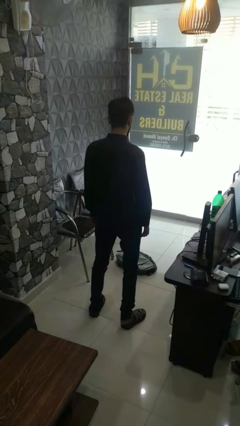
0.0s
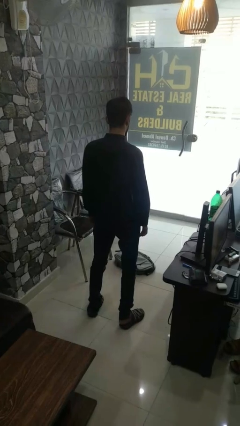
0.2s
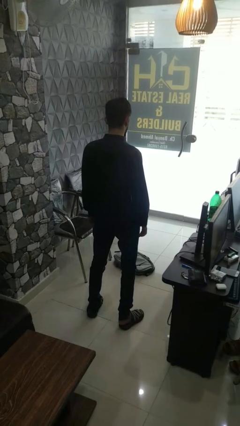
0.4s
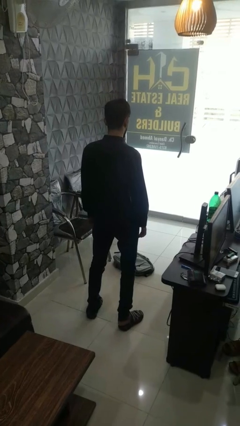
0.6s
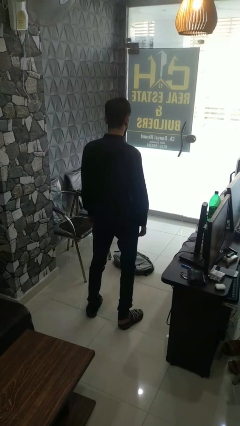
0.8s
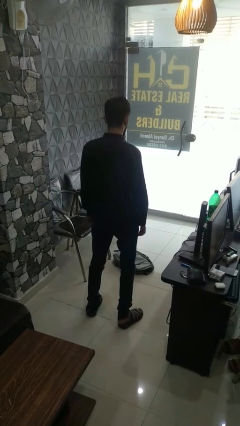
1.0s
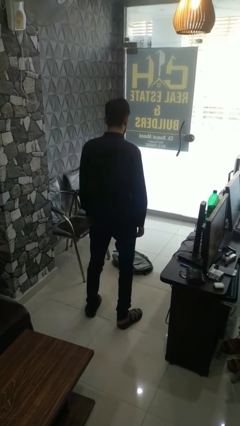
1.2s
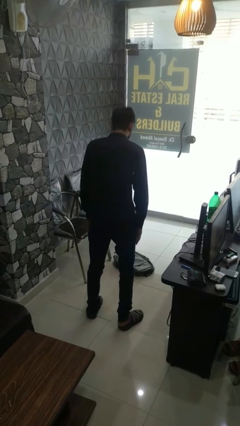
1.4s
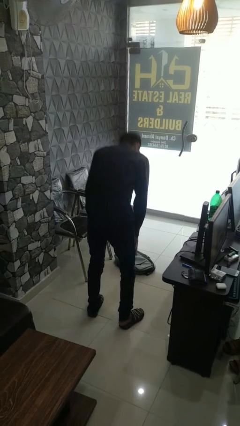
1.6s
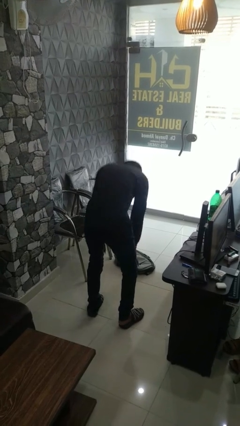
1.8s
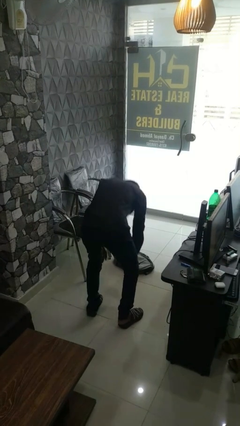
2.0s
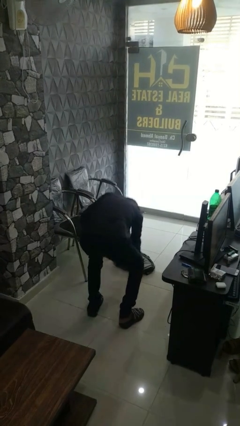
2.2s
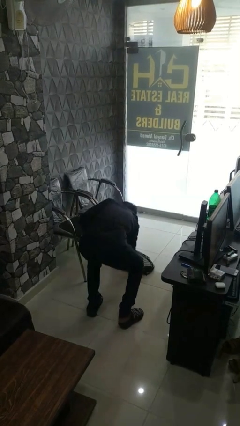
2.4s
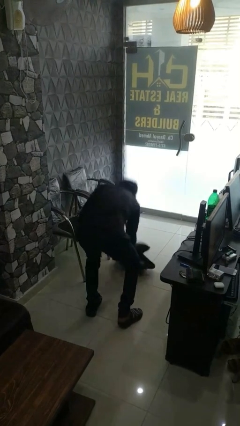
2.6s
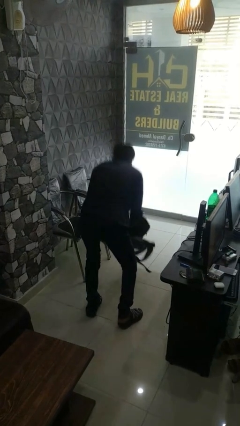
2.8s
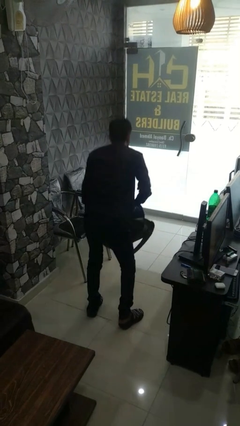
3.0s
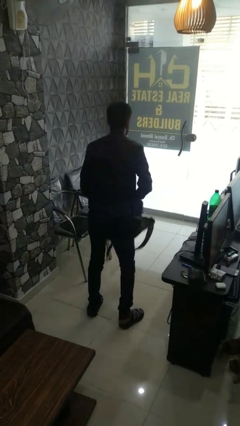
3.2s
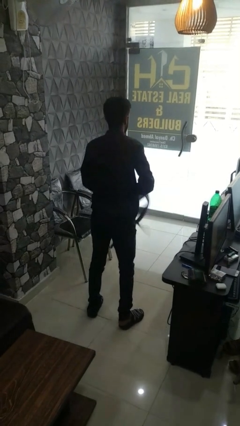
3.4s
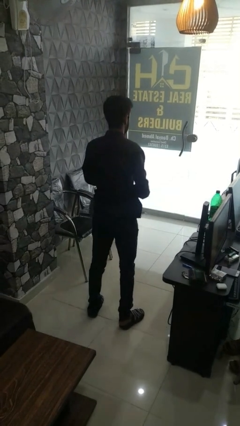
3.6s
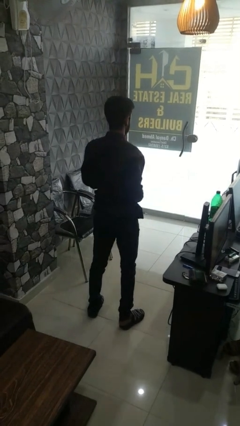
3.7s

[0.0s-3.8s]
person picks up object from floor

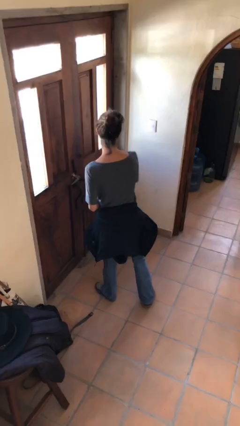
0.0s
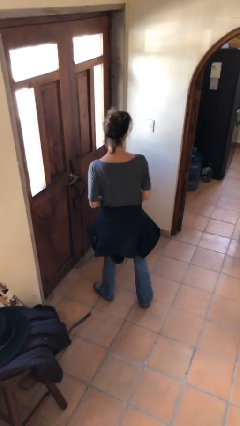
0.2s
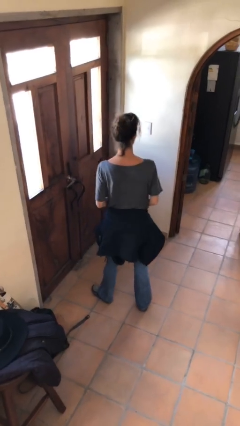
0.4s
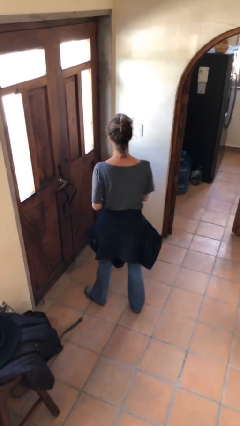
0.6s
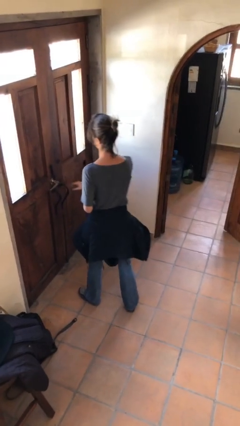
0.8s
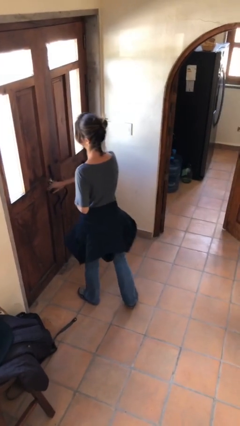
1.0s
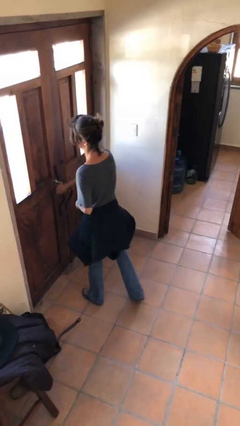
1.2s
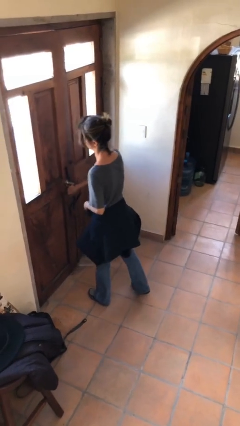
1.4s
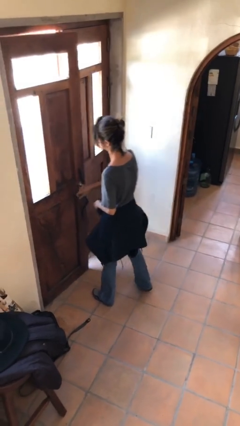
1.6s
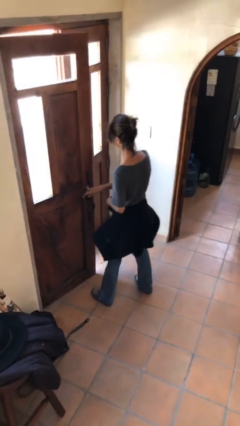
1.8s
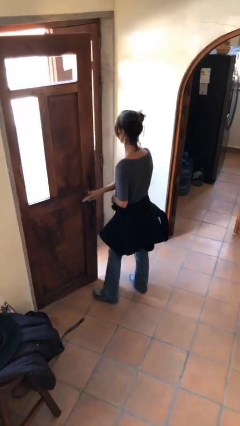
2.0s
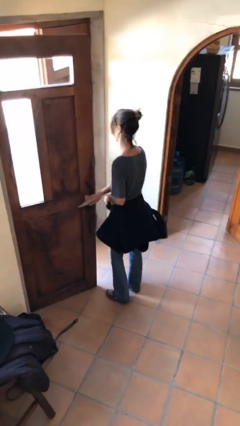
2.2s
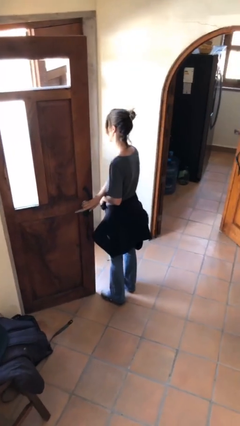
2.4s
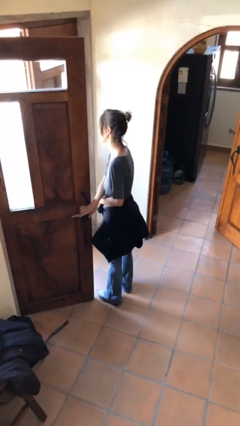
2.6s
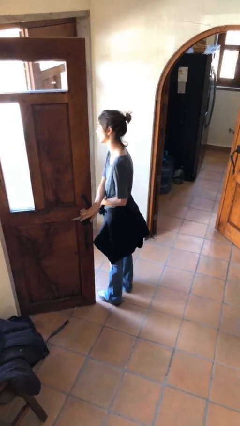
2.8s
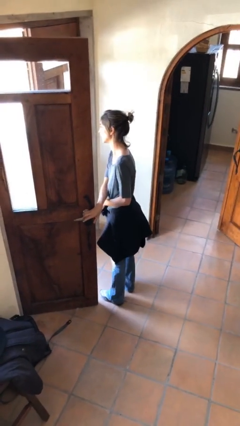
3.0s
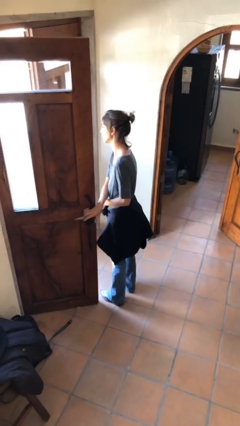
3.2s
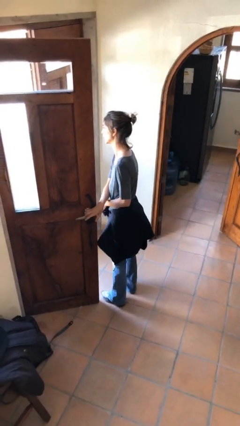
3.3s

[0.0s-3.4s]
person opens facility door

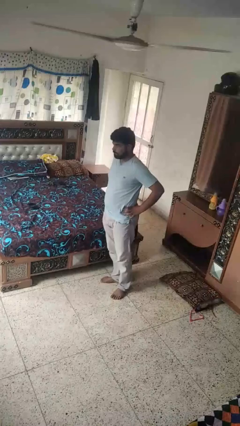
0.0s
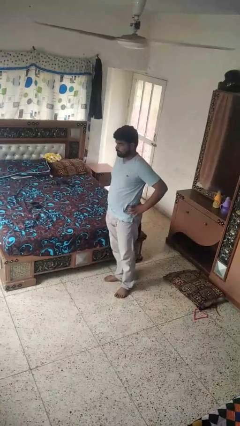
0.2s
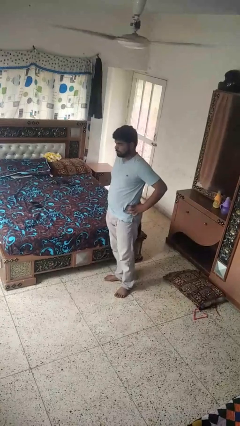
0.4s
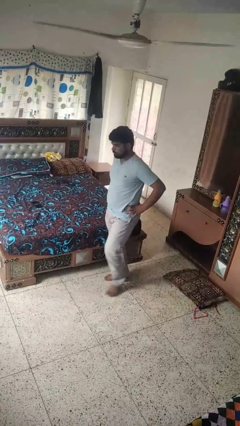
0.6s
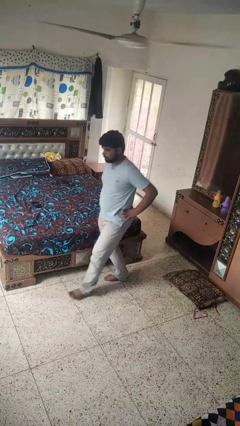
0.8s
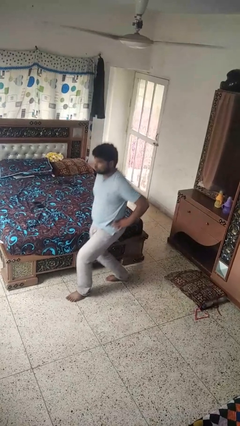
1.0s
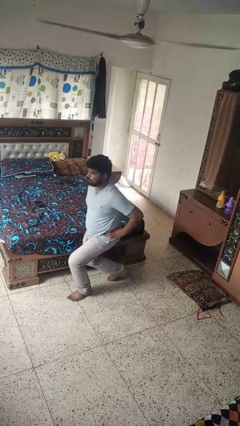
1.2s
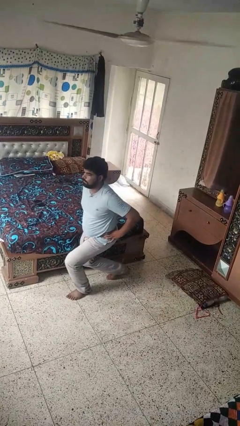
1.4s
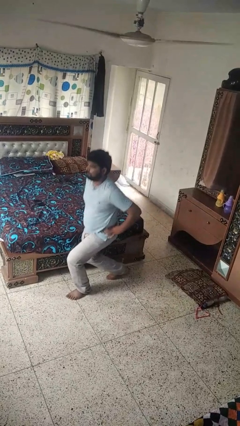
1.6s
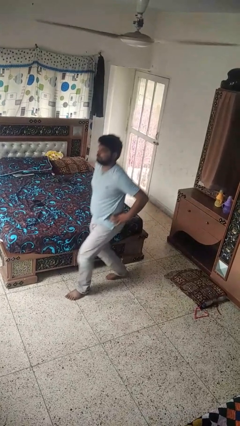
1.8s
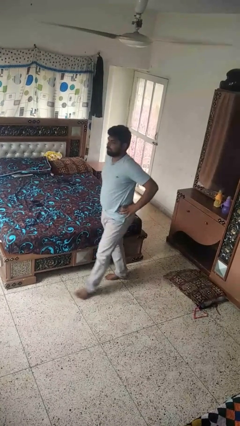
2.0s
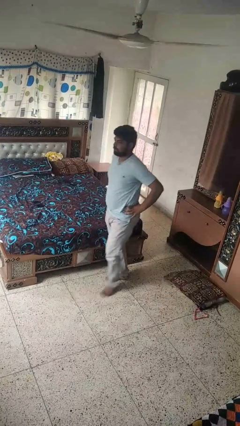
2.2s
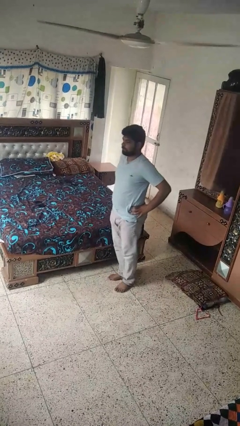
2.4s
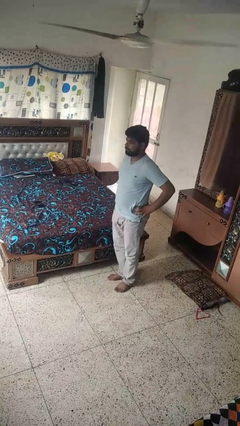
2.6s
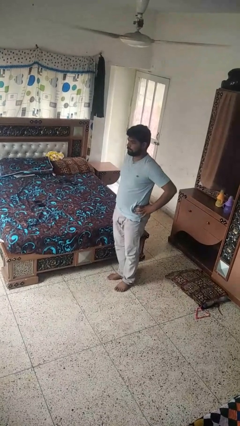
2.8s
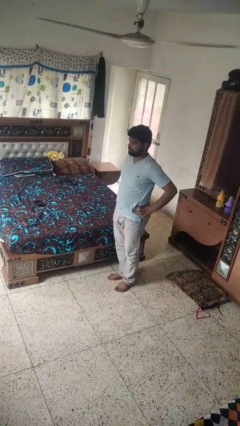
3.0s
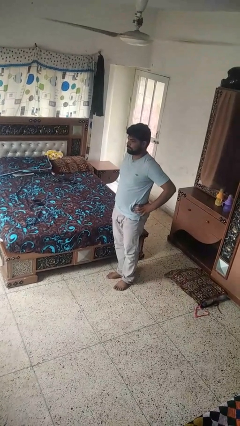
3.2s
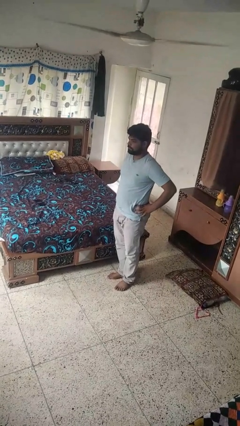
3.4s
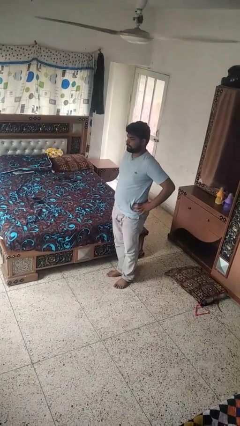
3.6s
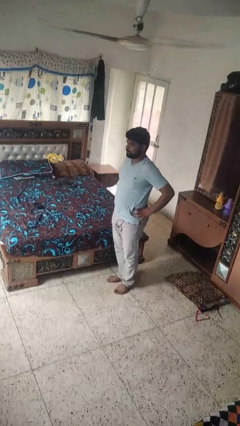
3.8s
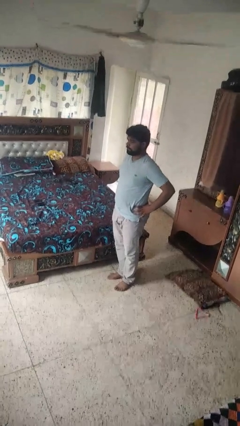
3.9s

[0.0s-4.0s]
person exercises with lunges

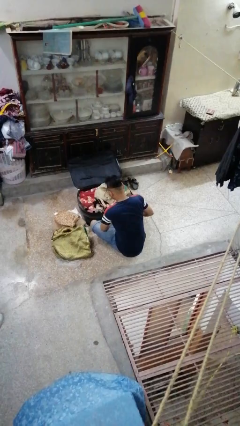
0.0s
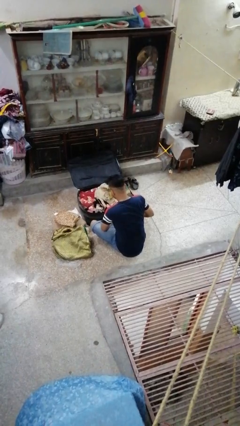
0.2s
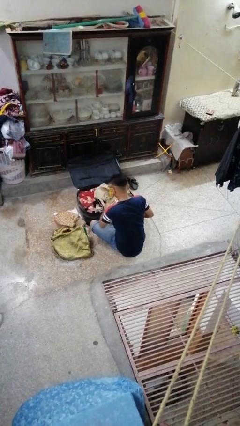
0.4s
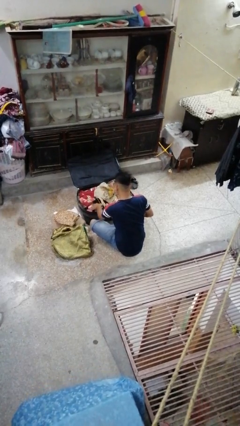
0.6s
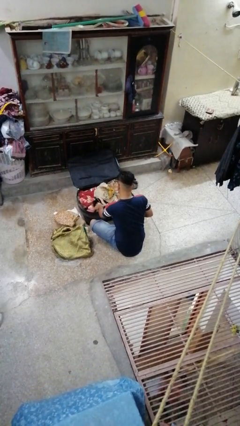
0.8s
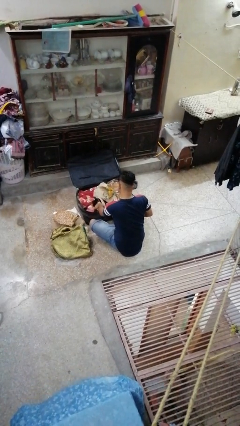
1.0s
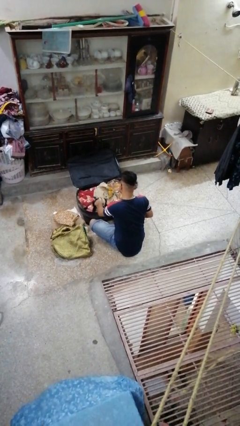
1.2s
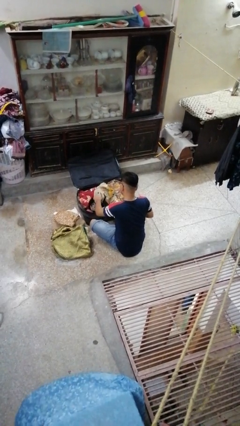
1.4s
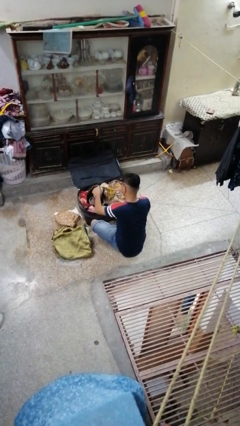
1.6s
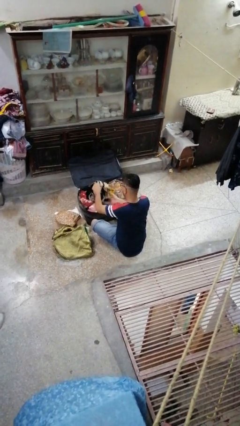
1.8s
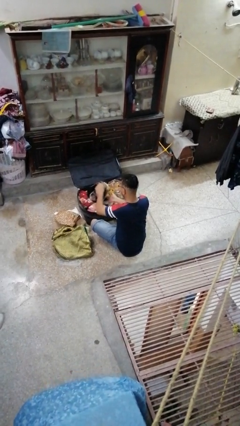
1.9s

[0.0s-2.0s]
person unloads clothes from suitcase

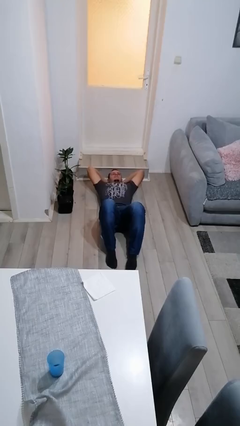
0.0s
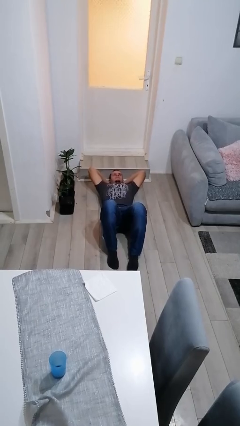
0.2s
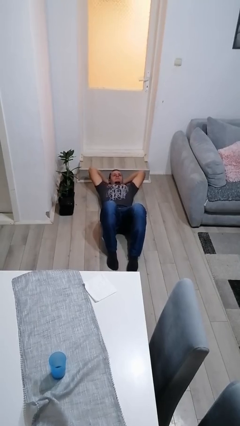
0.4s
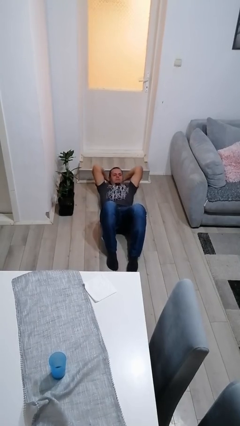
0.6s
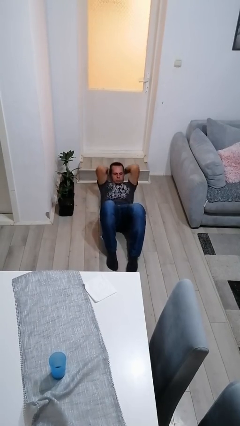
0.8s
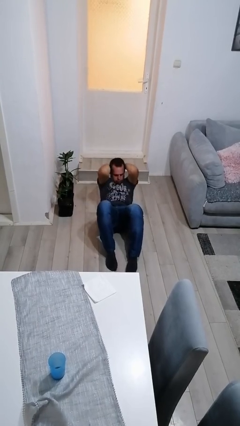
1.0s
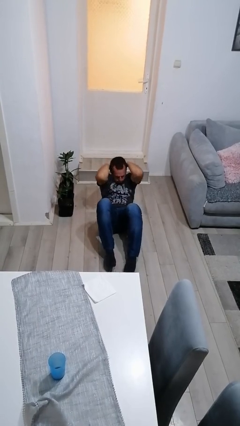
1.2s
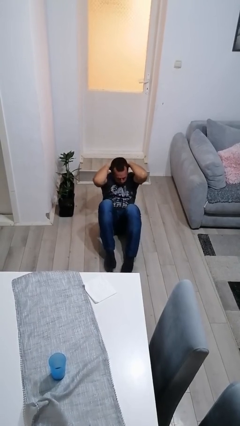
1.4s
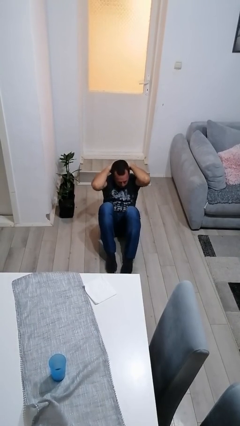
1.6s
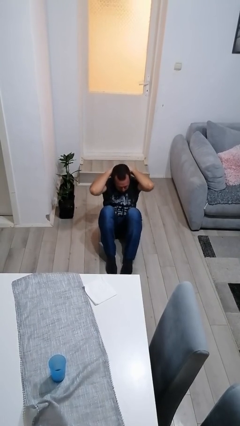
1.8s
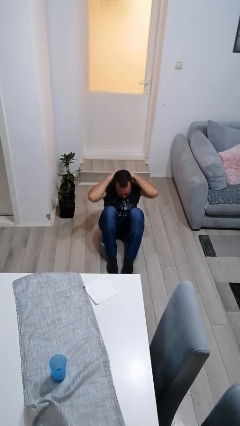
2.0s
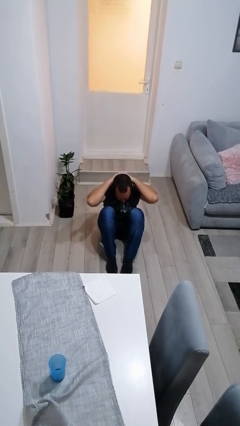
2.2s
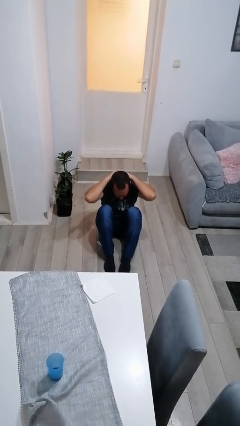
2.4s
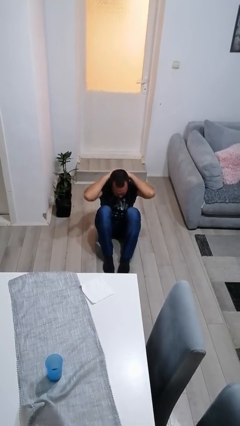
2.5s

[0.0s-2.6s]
person exercises with situp

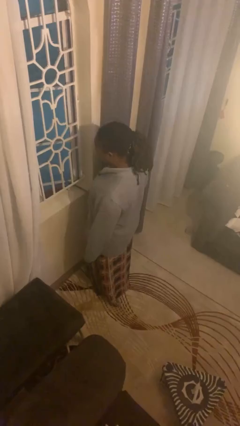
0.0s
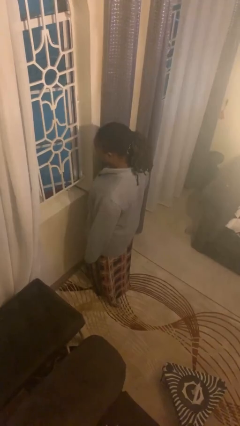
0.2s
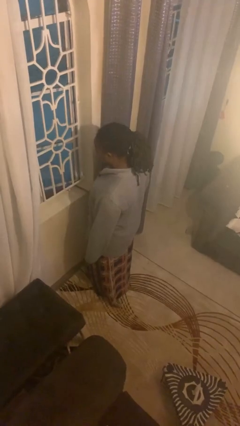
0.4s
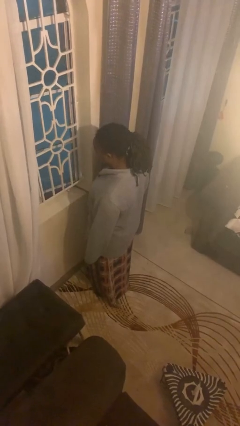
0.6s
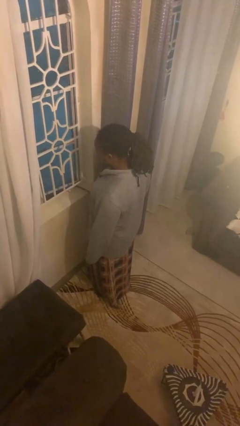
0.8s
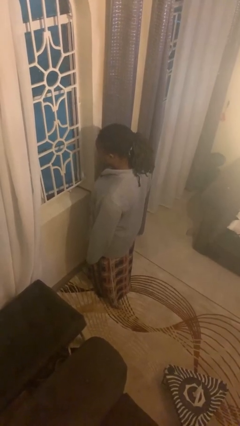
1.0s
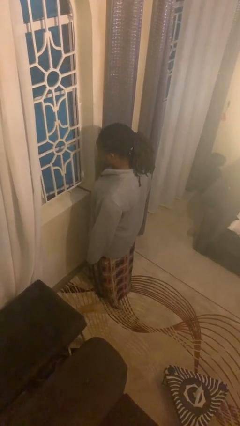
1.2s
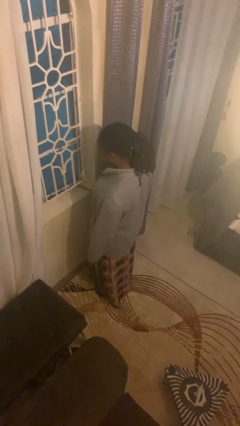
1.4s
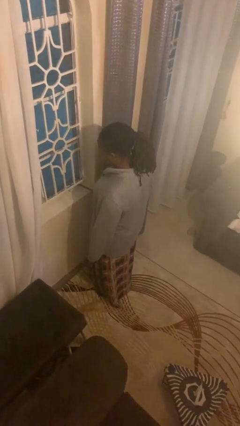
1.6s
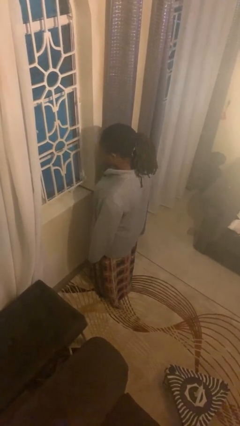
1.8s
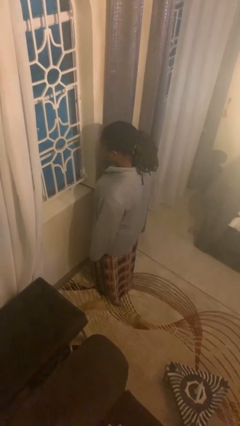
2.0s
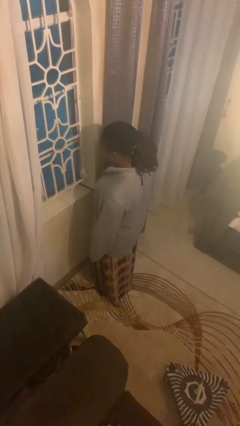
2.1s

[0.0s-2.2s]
person closes home window
